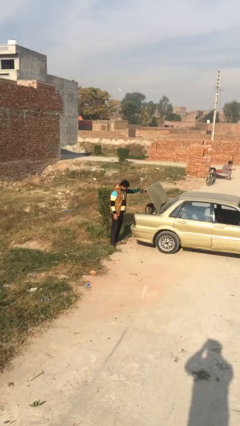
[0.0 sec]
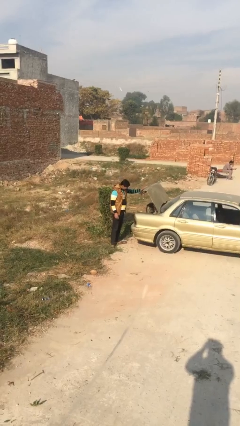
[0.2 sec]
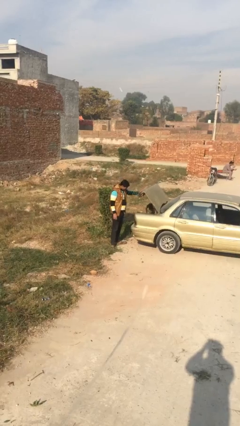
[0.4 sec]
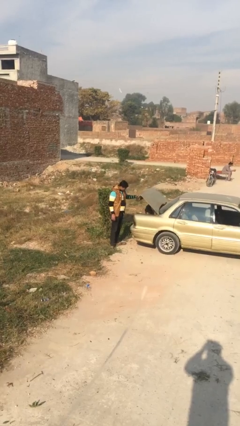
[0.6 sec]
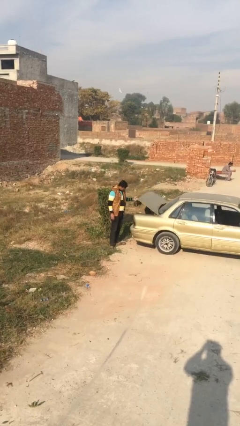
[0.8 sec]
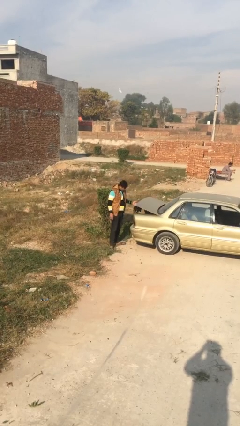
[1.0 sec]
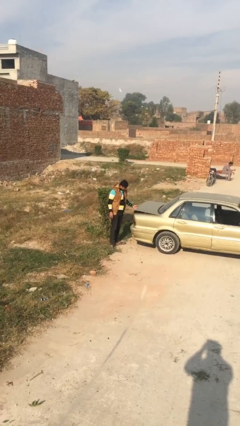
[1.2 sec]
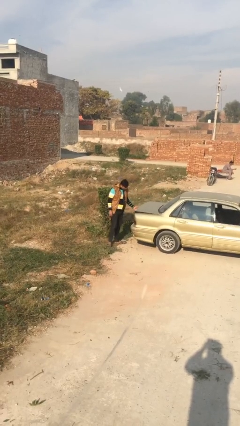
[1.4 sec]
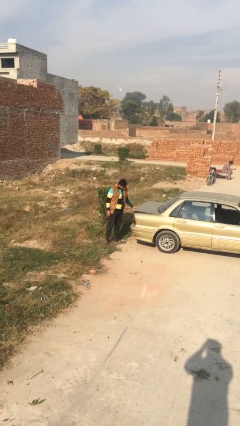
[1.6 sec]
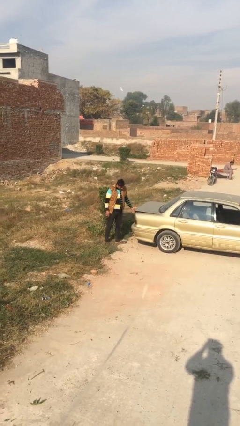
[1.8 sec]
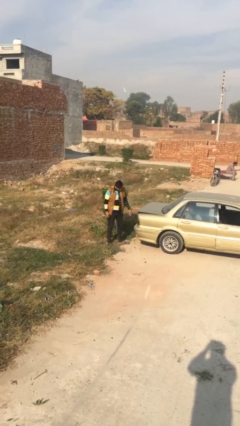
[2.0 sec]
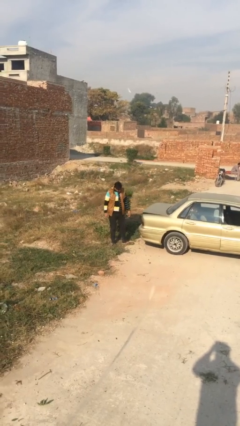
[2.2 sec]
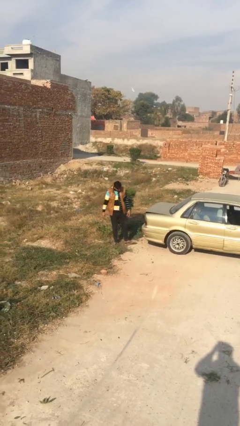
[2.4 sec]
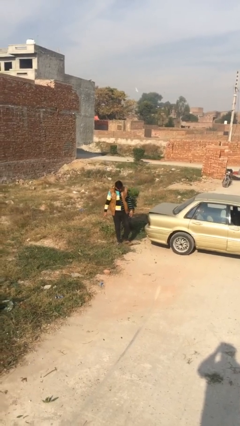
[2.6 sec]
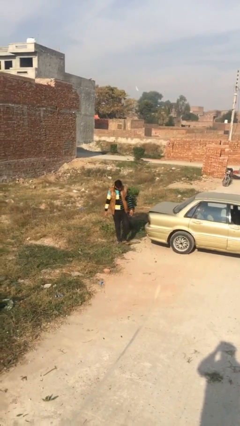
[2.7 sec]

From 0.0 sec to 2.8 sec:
person closes car trunk

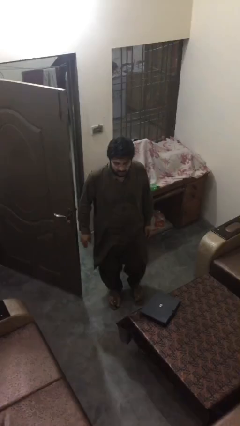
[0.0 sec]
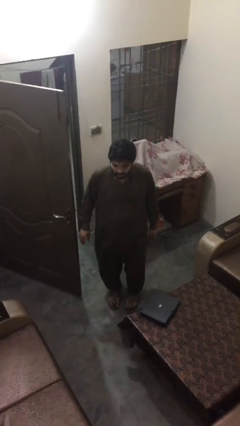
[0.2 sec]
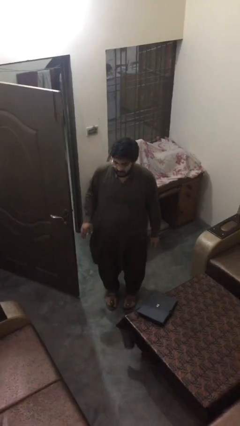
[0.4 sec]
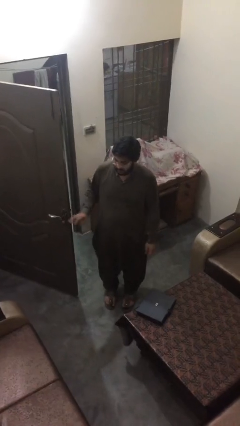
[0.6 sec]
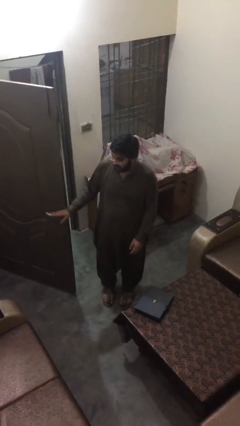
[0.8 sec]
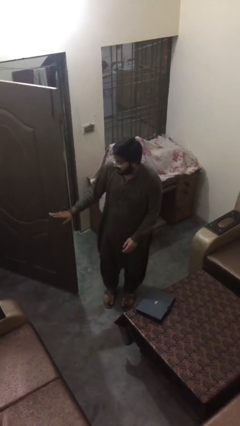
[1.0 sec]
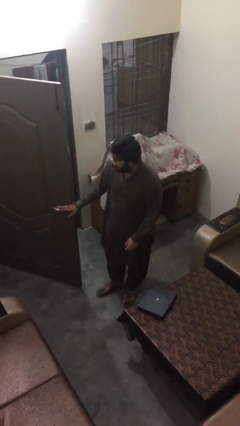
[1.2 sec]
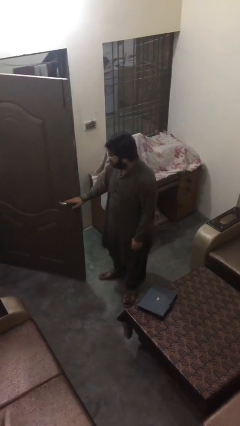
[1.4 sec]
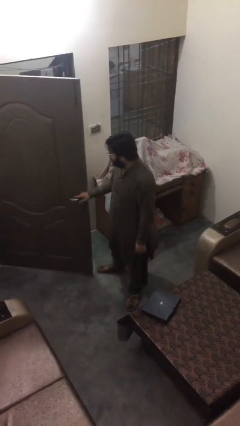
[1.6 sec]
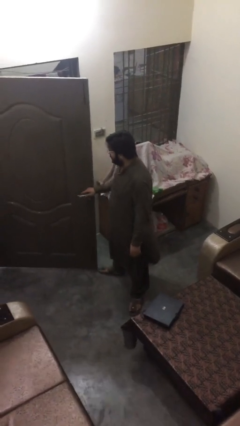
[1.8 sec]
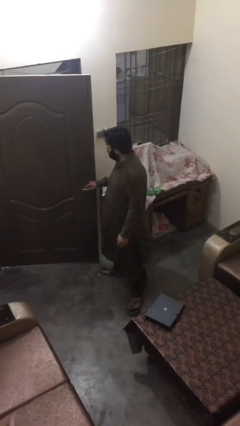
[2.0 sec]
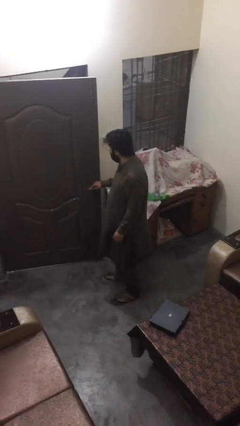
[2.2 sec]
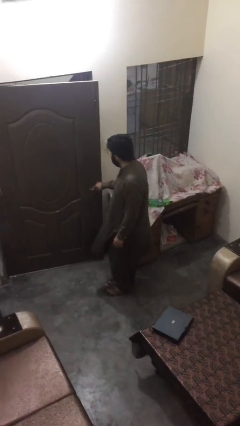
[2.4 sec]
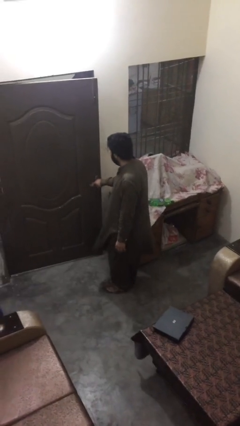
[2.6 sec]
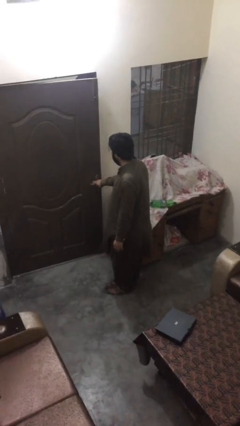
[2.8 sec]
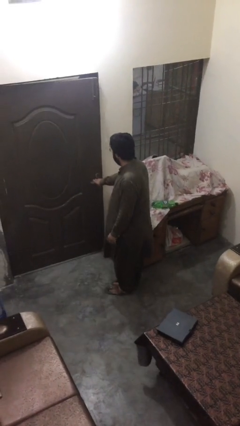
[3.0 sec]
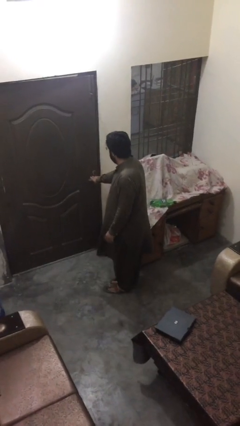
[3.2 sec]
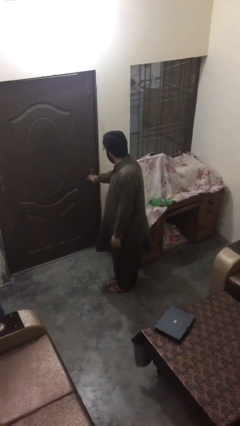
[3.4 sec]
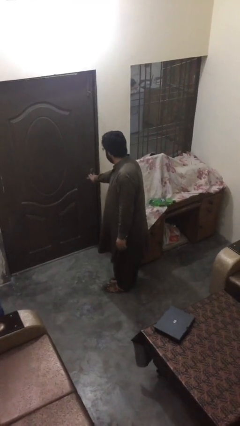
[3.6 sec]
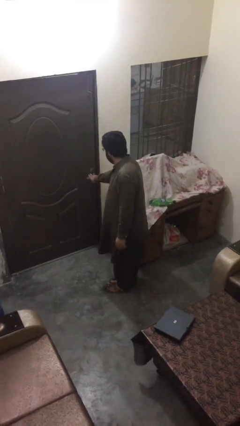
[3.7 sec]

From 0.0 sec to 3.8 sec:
person closes facility door

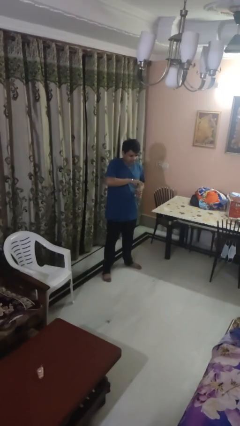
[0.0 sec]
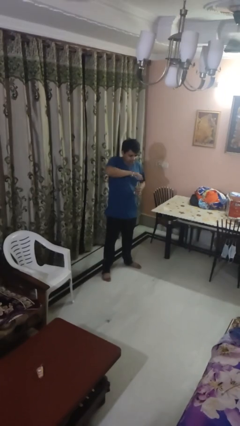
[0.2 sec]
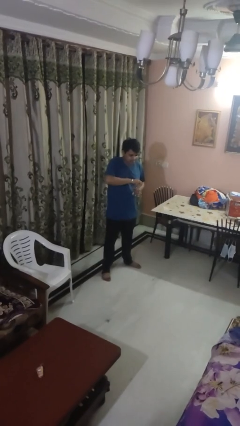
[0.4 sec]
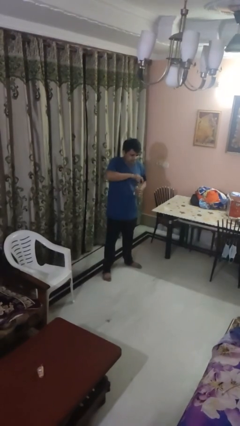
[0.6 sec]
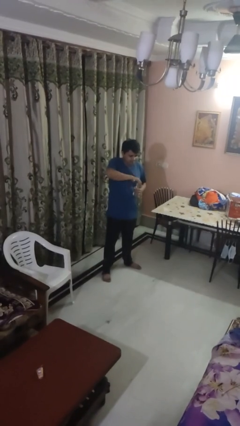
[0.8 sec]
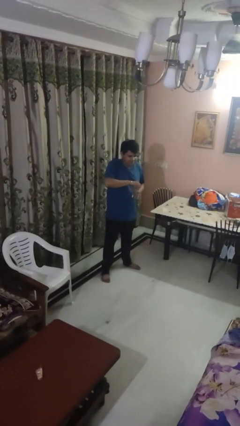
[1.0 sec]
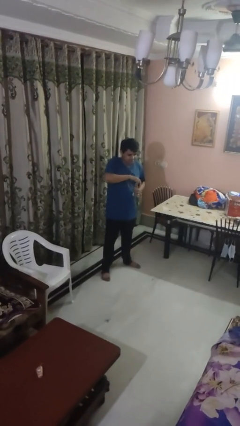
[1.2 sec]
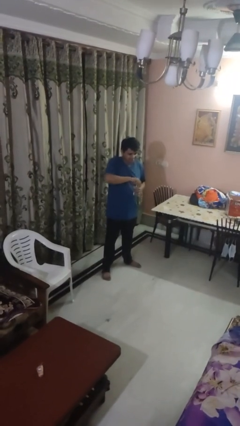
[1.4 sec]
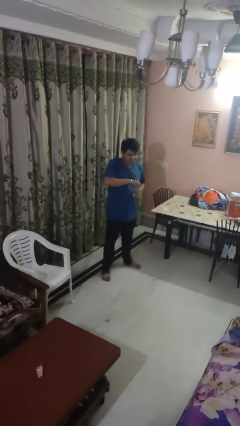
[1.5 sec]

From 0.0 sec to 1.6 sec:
person screws lid to bottle

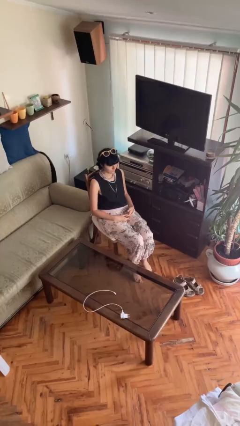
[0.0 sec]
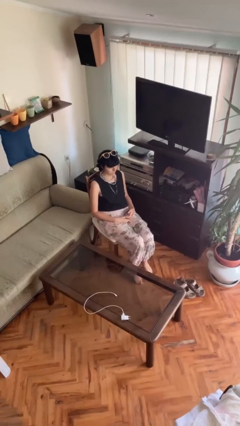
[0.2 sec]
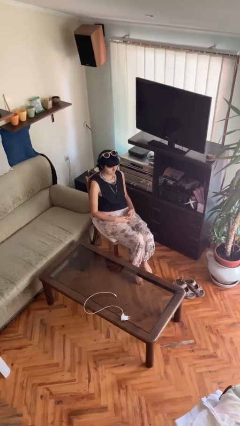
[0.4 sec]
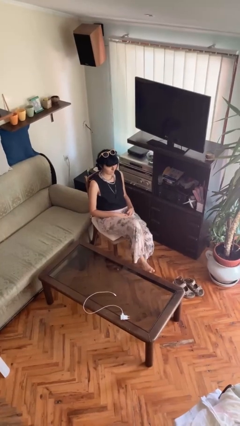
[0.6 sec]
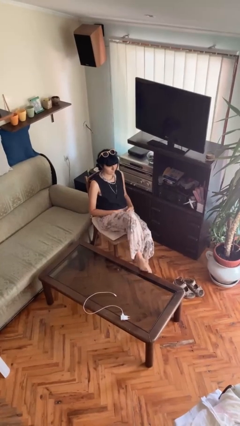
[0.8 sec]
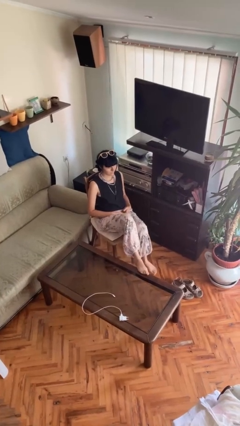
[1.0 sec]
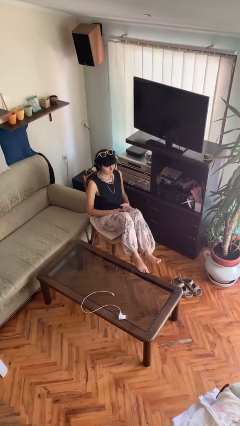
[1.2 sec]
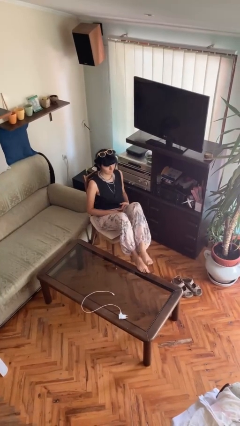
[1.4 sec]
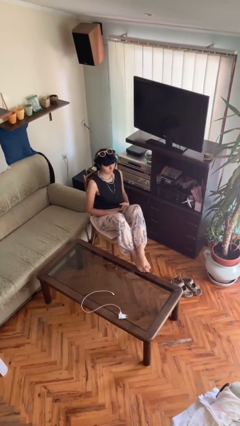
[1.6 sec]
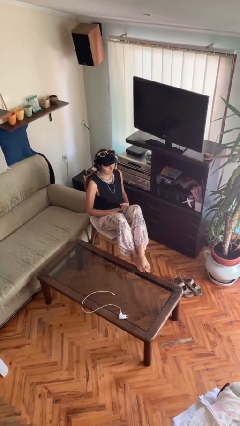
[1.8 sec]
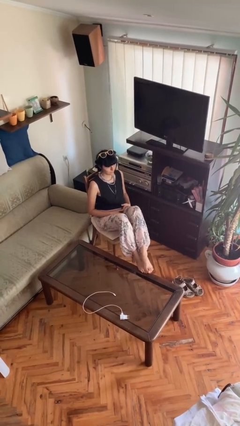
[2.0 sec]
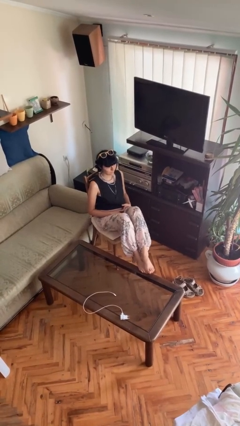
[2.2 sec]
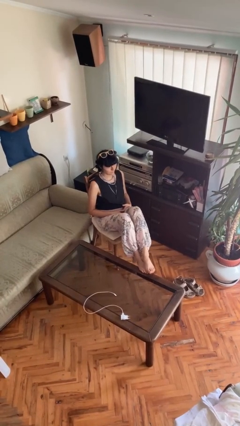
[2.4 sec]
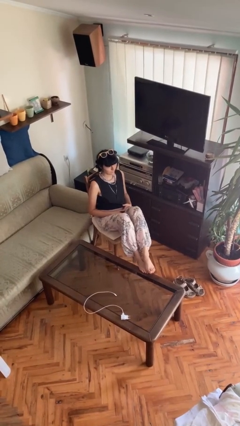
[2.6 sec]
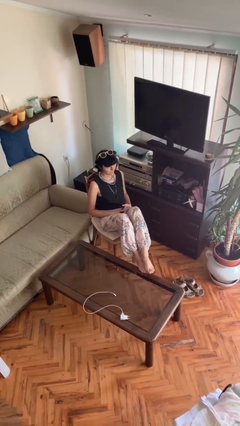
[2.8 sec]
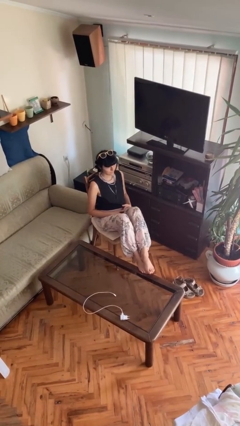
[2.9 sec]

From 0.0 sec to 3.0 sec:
person puts feet up

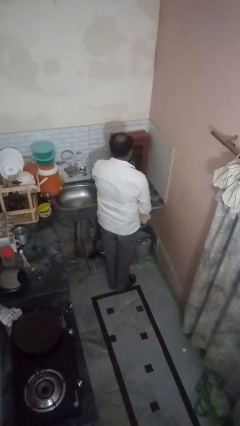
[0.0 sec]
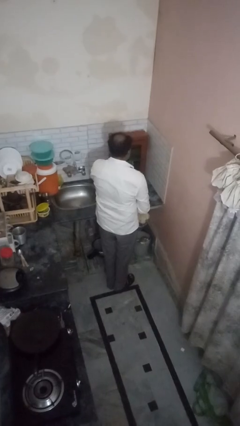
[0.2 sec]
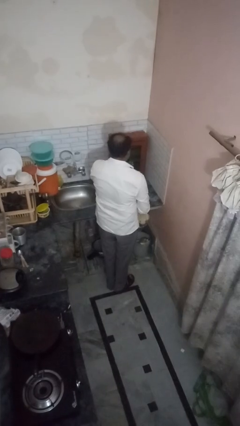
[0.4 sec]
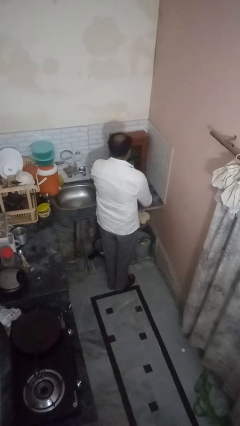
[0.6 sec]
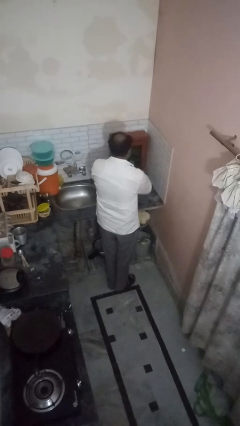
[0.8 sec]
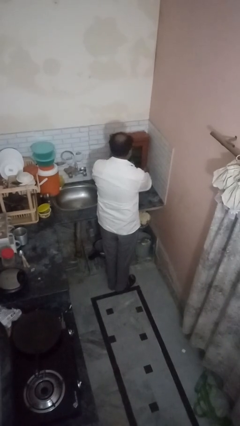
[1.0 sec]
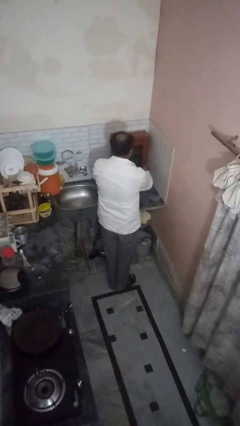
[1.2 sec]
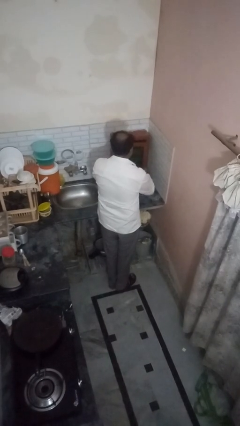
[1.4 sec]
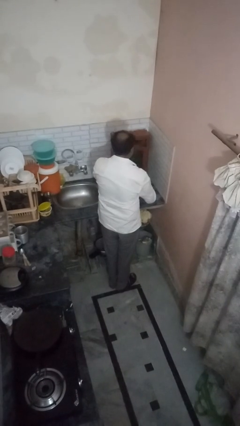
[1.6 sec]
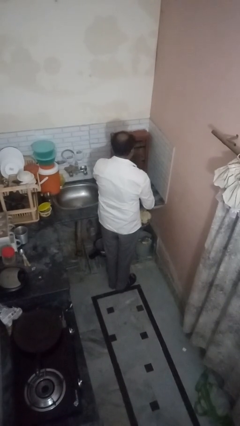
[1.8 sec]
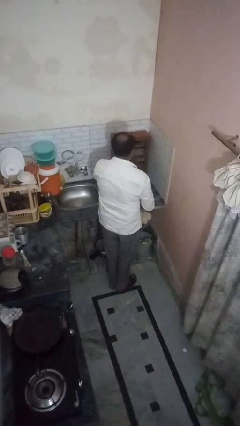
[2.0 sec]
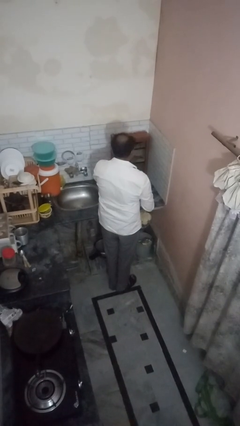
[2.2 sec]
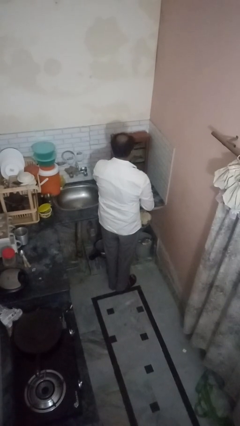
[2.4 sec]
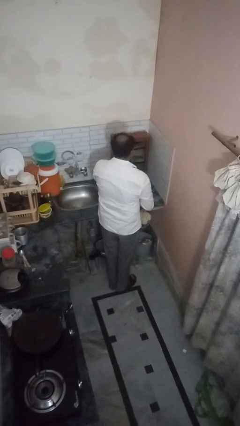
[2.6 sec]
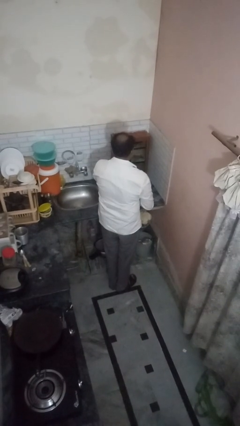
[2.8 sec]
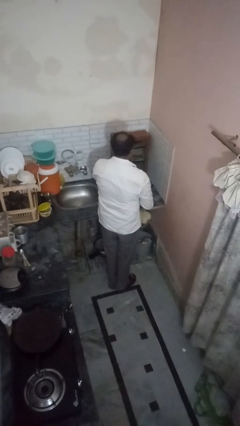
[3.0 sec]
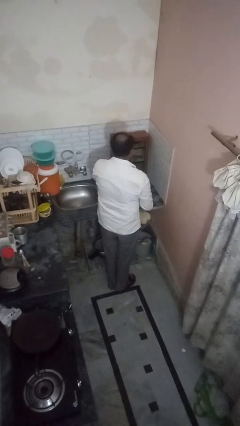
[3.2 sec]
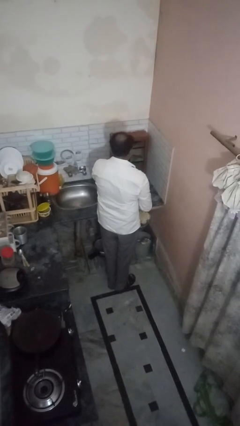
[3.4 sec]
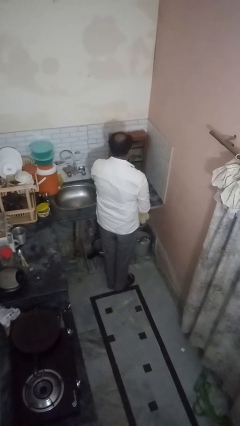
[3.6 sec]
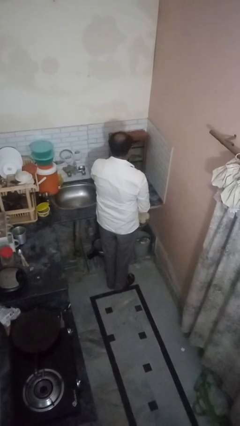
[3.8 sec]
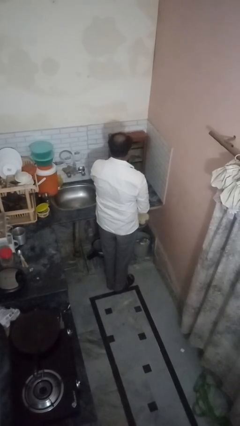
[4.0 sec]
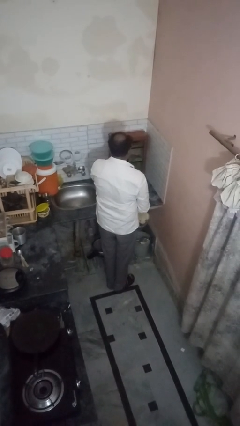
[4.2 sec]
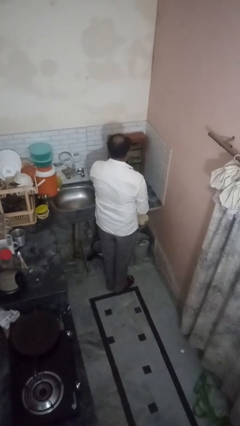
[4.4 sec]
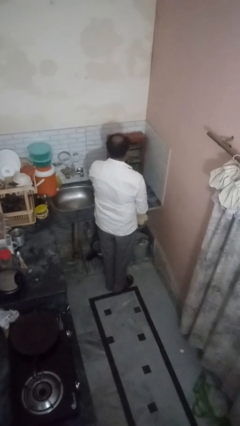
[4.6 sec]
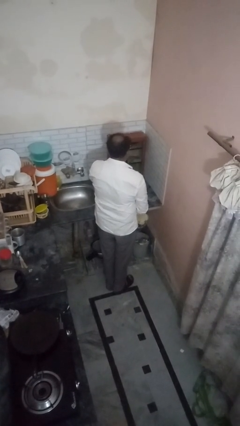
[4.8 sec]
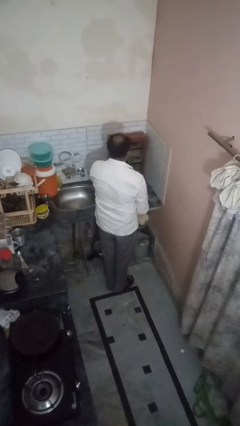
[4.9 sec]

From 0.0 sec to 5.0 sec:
person opens kitchen drawer

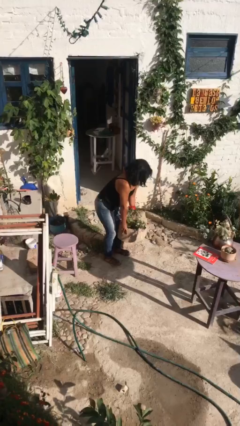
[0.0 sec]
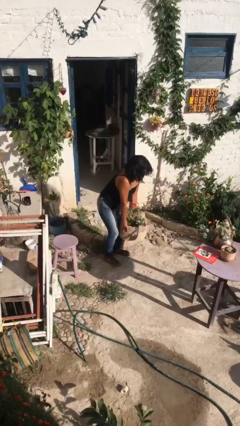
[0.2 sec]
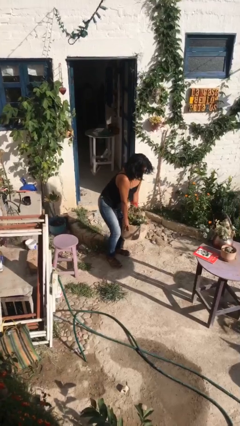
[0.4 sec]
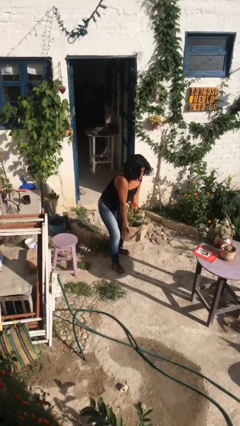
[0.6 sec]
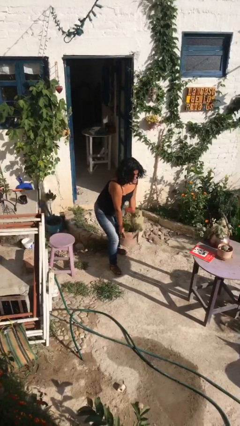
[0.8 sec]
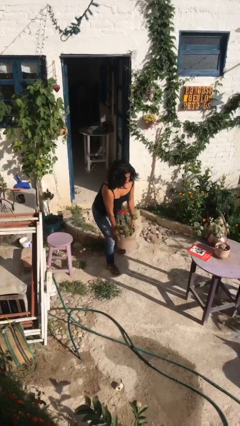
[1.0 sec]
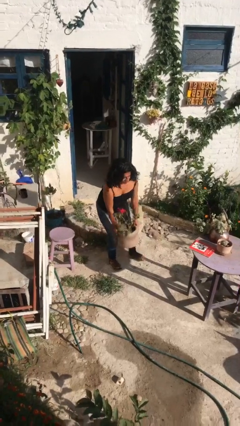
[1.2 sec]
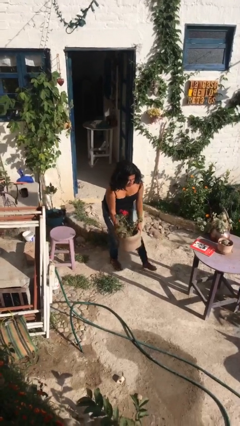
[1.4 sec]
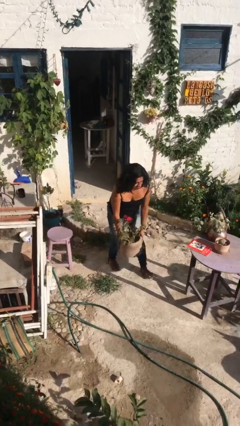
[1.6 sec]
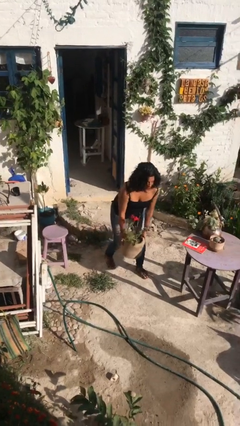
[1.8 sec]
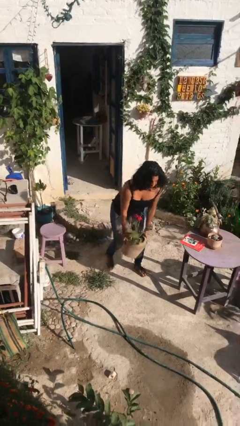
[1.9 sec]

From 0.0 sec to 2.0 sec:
person carries heavy object
